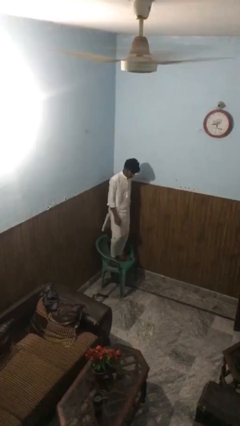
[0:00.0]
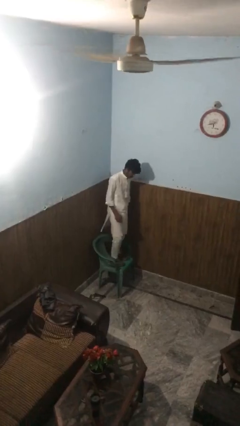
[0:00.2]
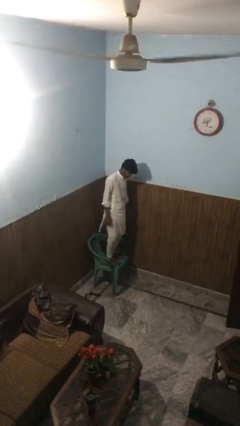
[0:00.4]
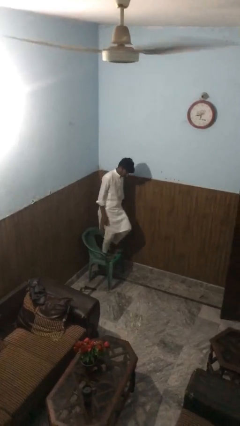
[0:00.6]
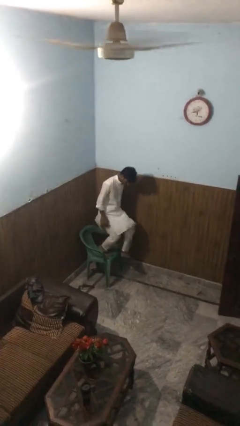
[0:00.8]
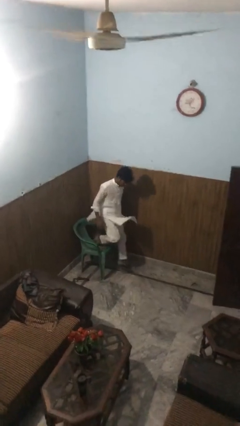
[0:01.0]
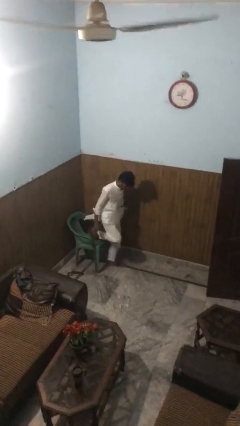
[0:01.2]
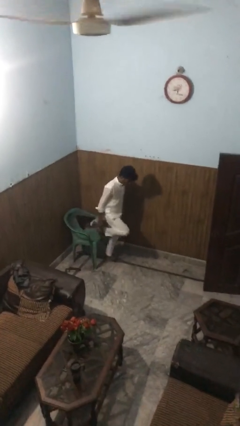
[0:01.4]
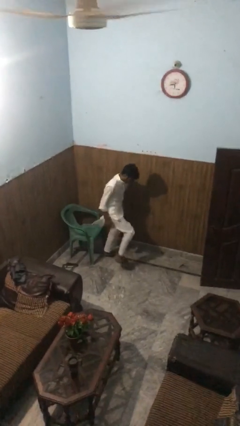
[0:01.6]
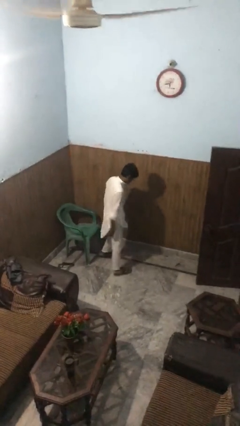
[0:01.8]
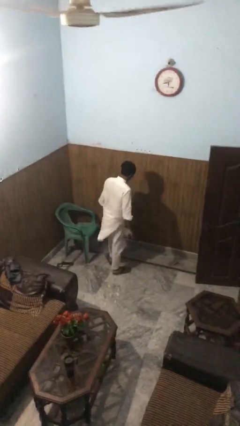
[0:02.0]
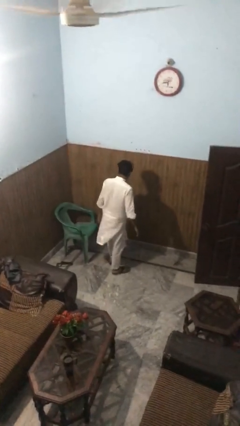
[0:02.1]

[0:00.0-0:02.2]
person climbs off chair

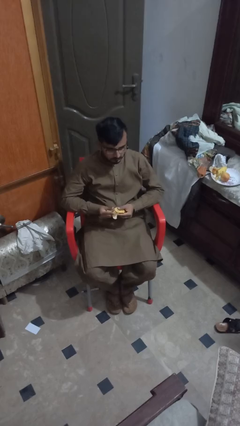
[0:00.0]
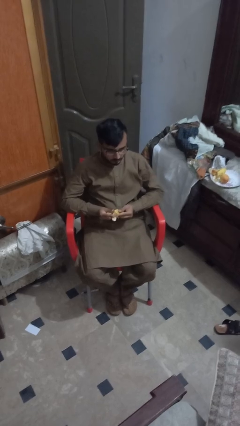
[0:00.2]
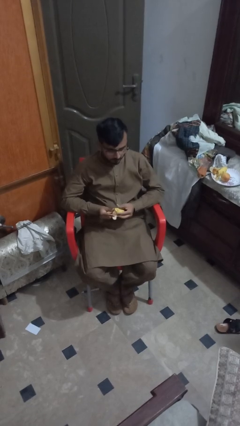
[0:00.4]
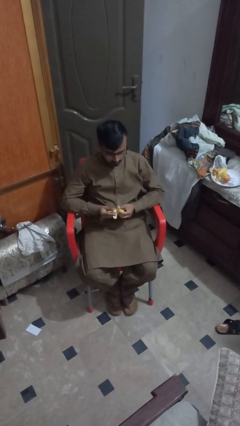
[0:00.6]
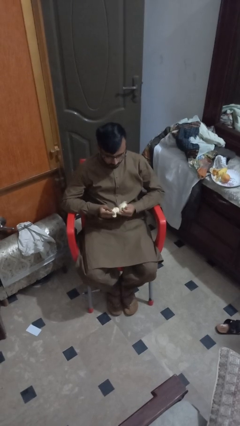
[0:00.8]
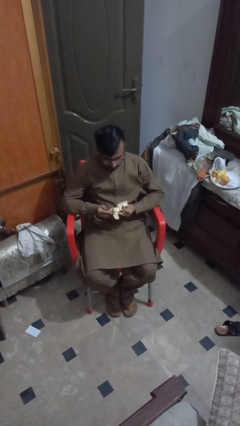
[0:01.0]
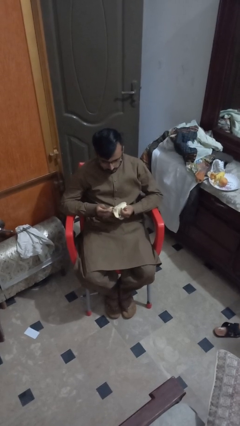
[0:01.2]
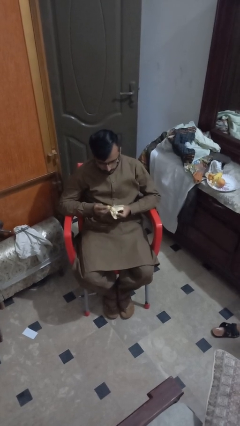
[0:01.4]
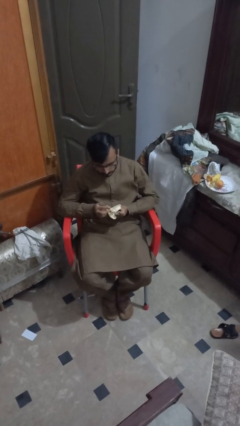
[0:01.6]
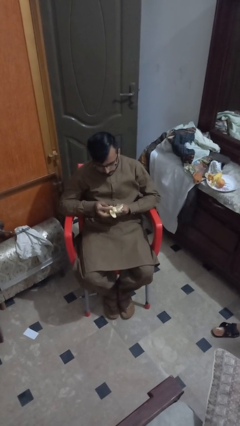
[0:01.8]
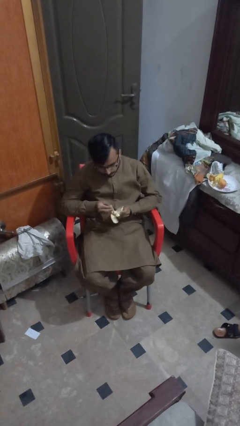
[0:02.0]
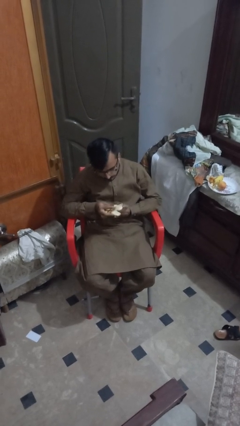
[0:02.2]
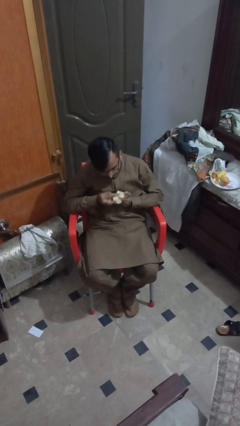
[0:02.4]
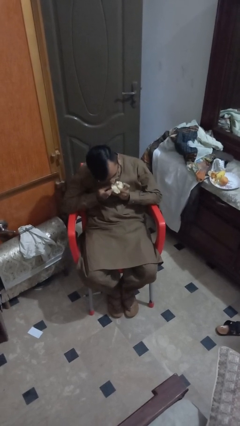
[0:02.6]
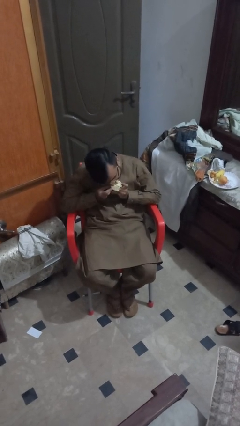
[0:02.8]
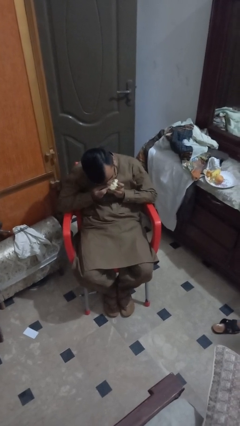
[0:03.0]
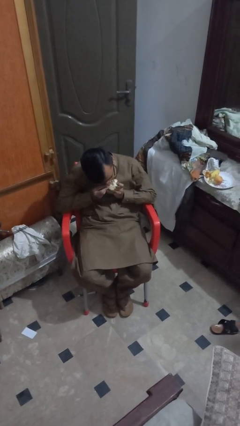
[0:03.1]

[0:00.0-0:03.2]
person eats banana

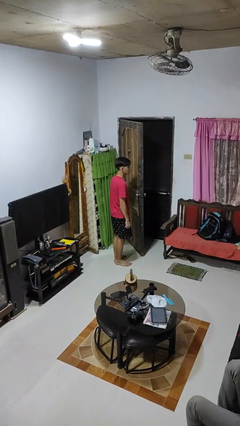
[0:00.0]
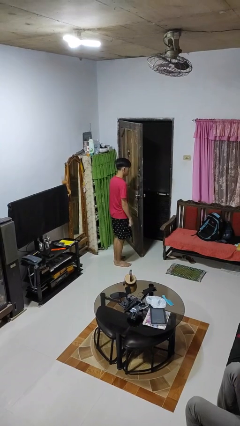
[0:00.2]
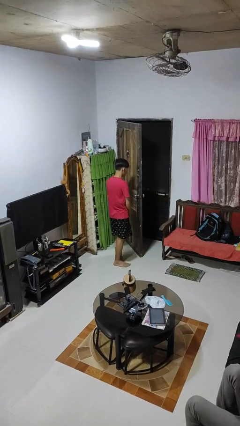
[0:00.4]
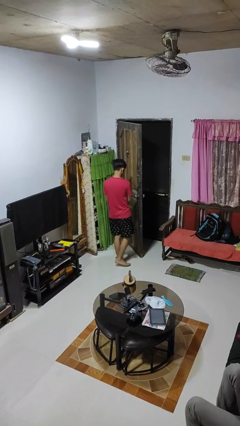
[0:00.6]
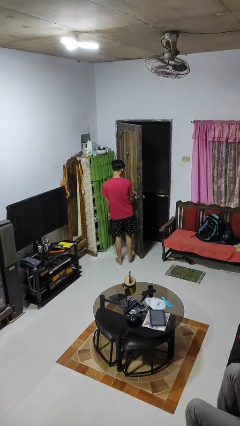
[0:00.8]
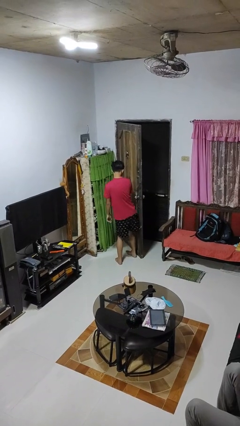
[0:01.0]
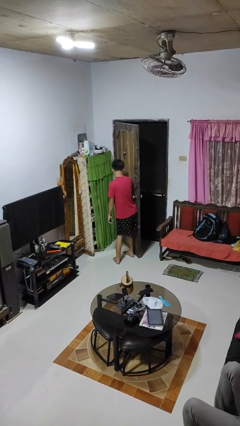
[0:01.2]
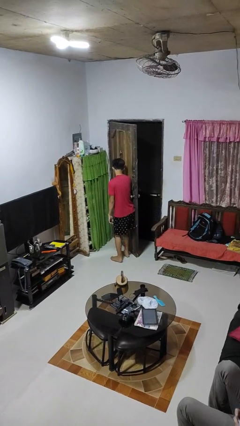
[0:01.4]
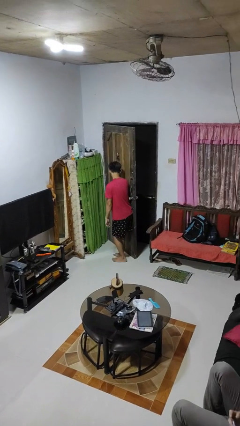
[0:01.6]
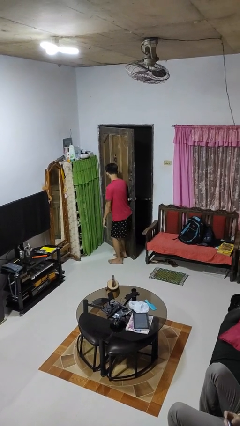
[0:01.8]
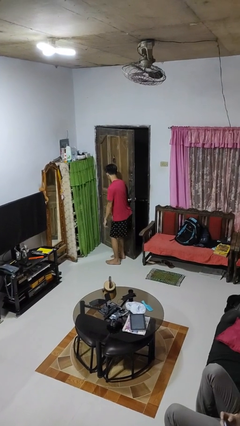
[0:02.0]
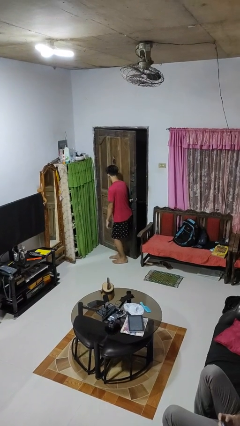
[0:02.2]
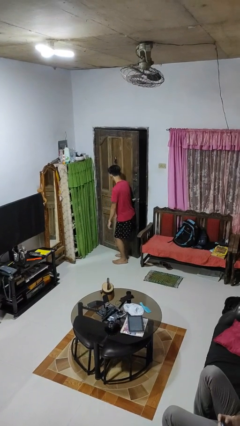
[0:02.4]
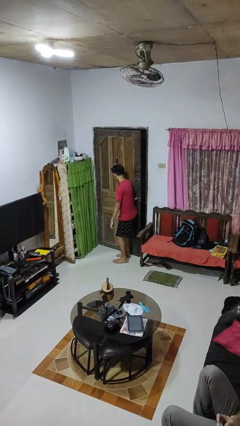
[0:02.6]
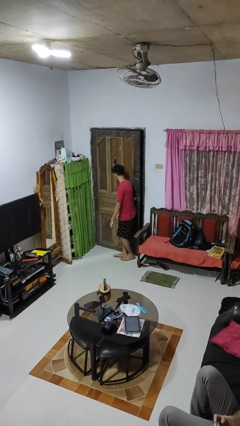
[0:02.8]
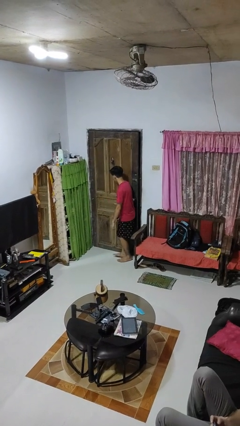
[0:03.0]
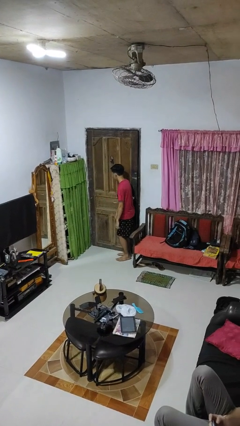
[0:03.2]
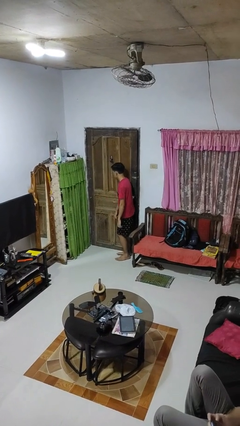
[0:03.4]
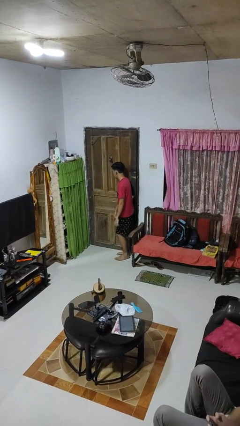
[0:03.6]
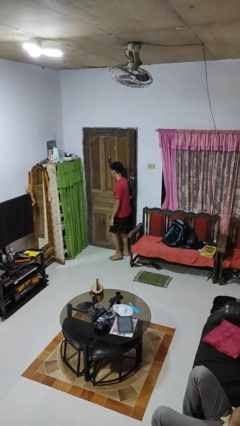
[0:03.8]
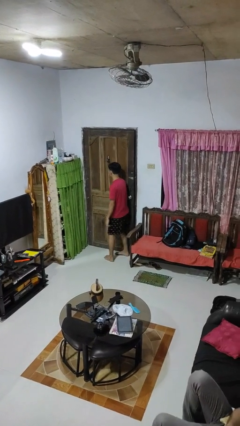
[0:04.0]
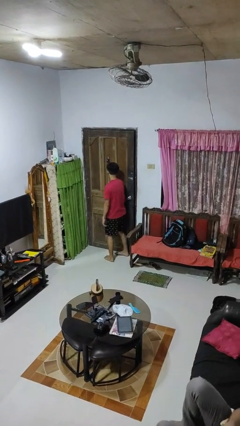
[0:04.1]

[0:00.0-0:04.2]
person closes door with hip

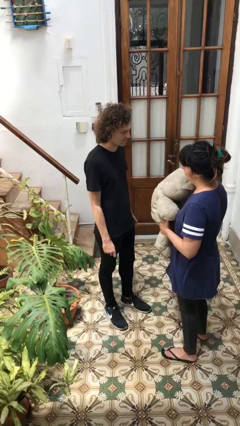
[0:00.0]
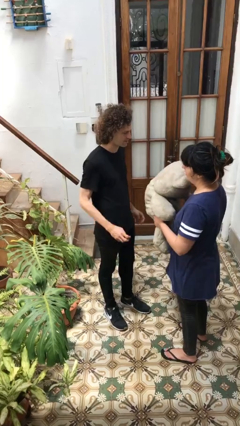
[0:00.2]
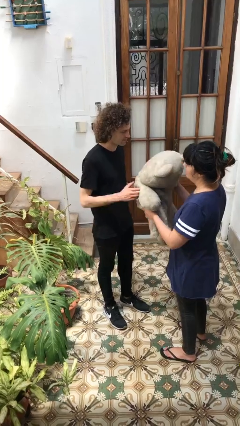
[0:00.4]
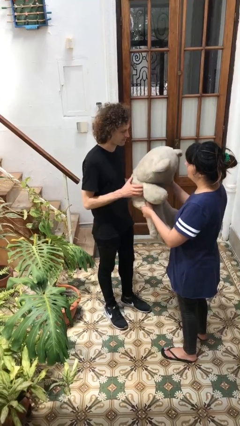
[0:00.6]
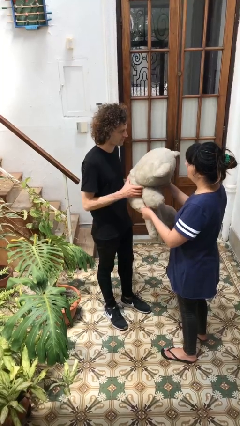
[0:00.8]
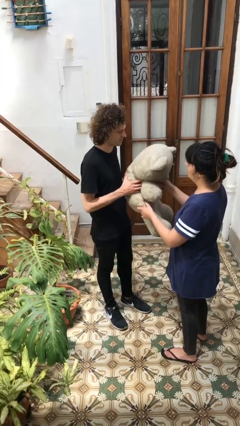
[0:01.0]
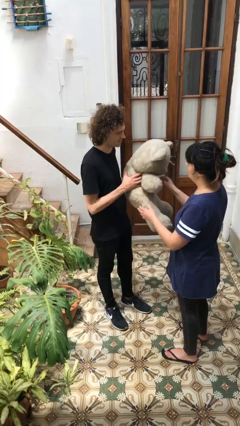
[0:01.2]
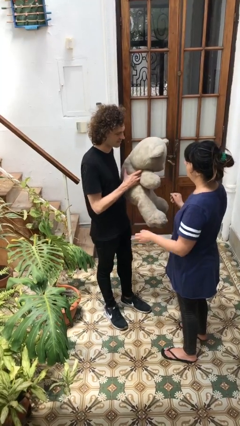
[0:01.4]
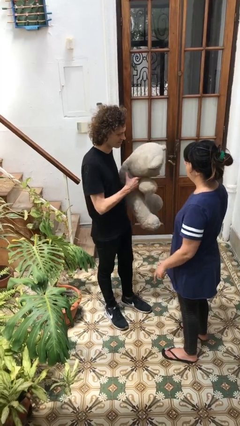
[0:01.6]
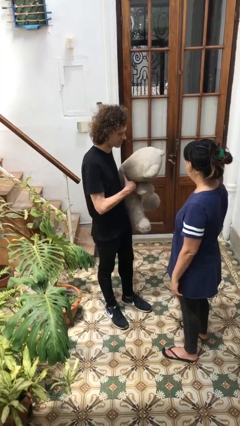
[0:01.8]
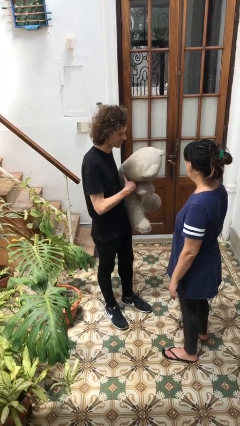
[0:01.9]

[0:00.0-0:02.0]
person transfers object to person

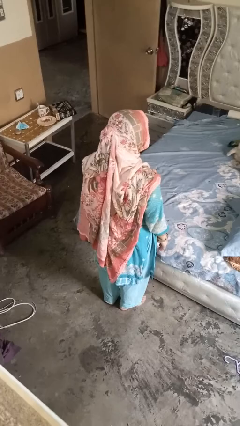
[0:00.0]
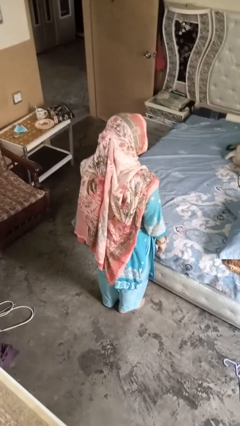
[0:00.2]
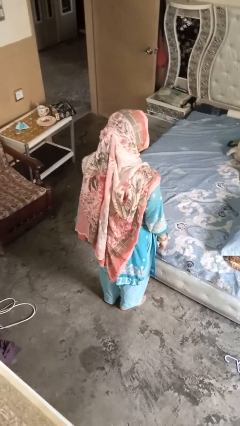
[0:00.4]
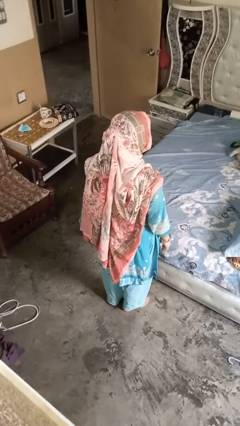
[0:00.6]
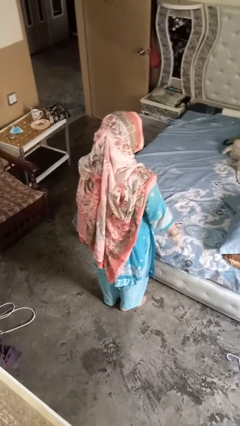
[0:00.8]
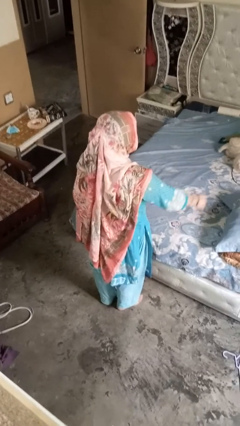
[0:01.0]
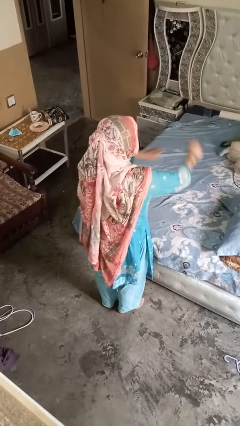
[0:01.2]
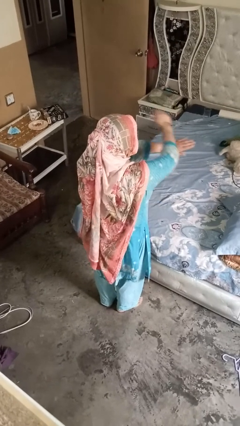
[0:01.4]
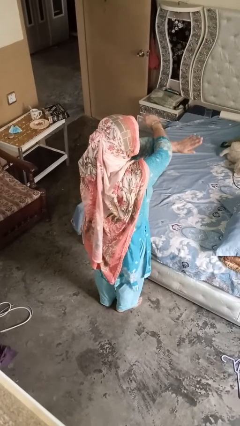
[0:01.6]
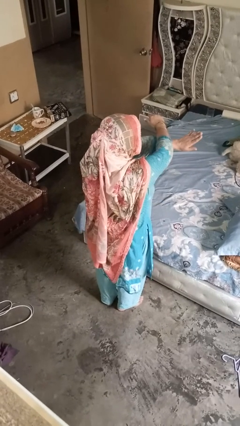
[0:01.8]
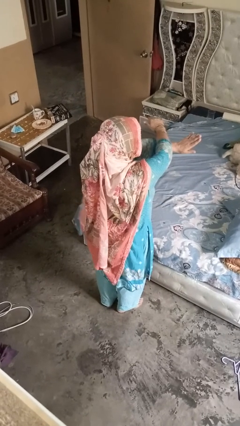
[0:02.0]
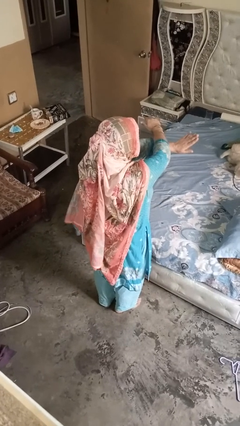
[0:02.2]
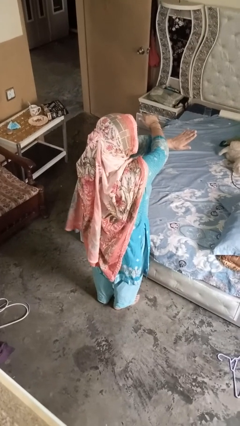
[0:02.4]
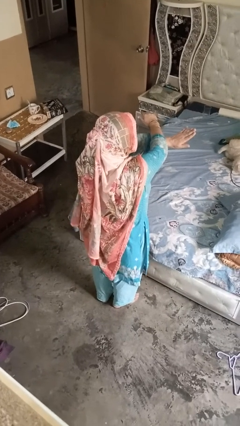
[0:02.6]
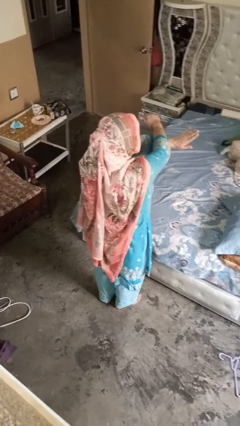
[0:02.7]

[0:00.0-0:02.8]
person gestures arms x

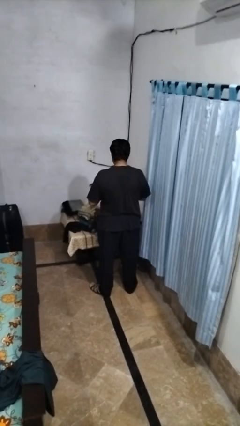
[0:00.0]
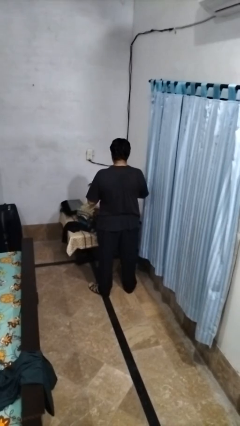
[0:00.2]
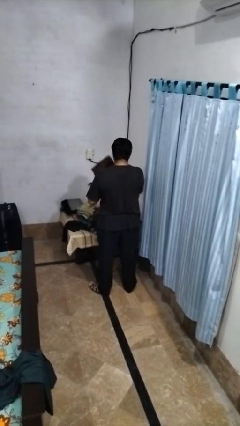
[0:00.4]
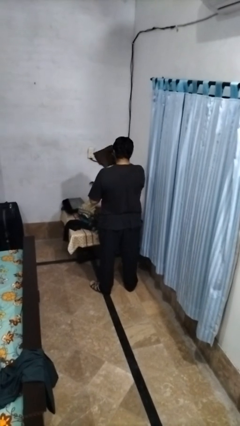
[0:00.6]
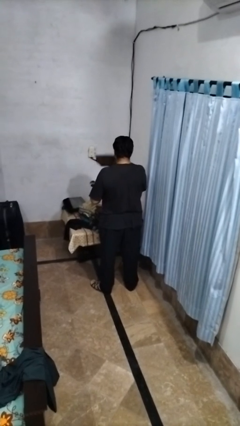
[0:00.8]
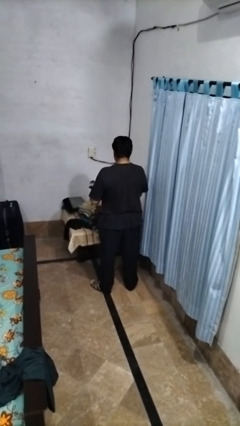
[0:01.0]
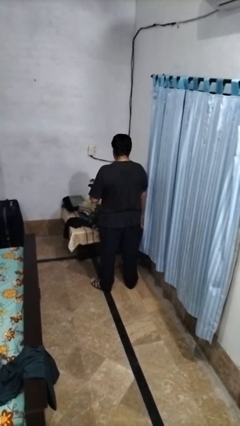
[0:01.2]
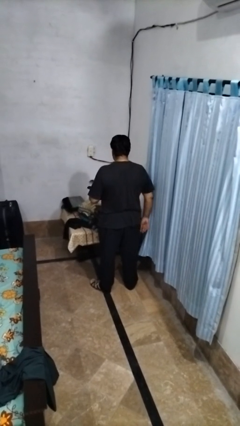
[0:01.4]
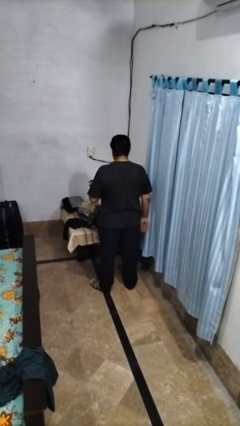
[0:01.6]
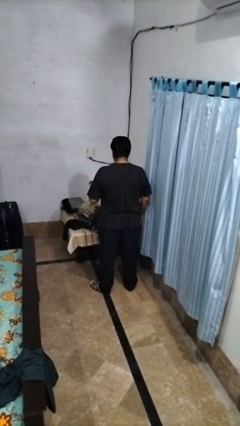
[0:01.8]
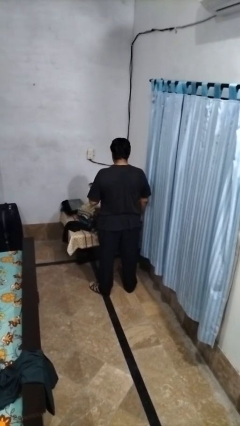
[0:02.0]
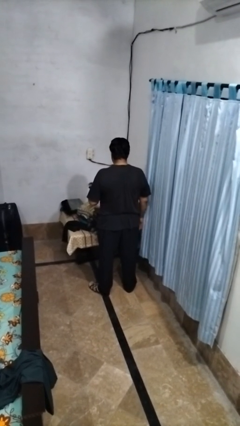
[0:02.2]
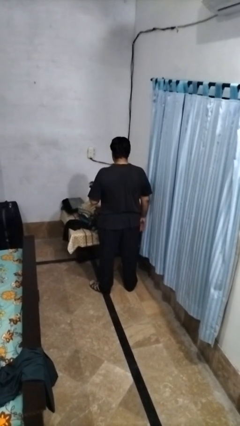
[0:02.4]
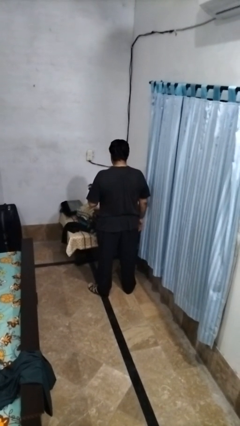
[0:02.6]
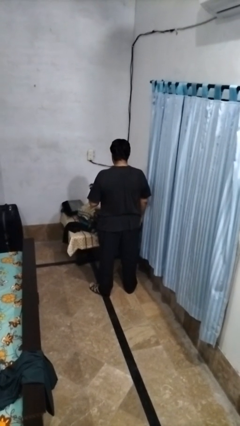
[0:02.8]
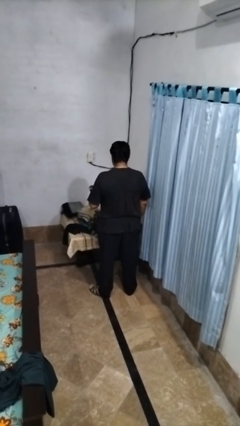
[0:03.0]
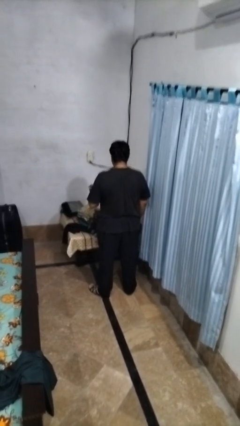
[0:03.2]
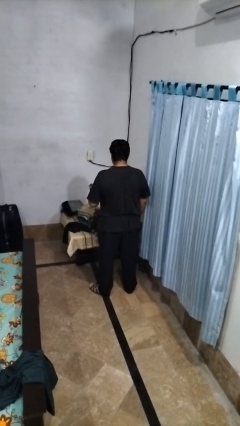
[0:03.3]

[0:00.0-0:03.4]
person loads clothes into suitcase
